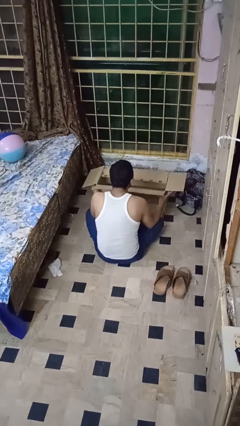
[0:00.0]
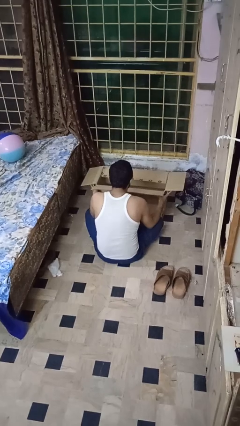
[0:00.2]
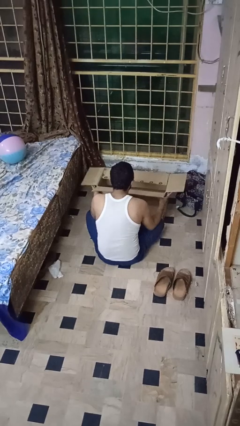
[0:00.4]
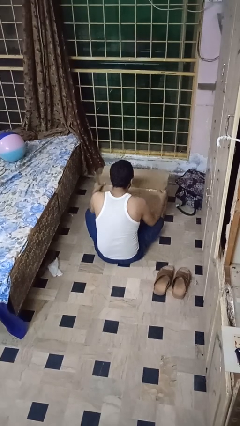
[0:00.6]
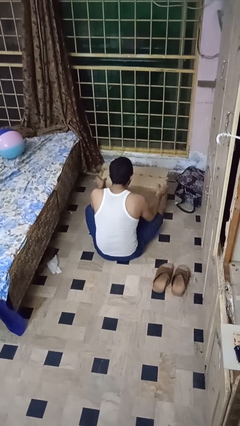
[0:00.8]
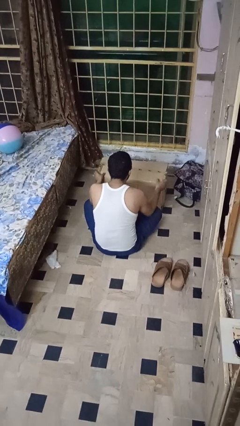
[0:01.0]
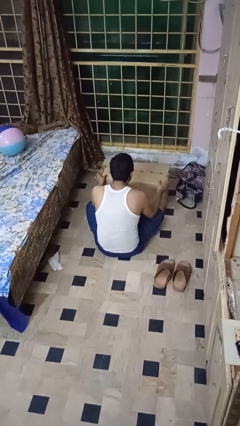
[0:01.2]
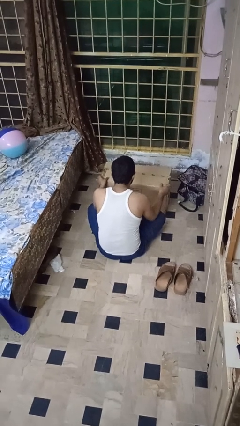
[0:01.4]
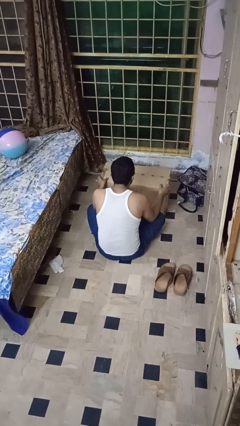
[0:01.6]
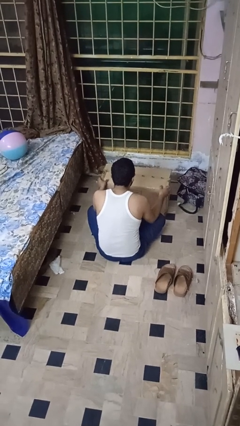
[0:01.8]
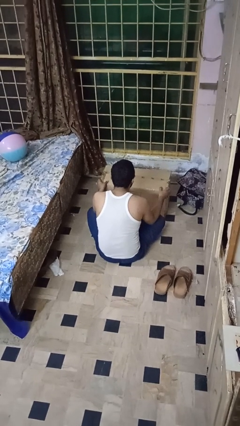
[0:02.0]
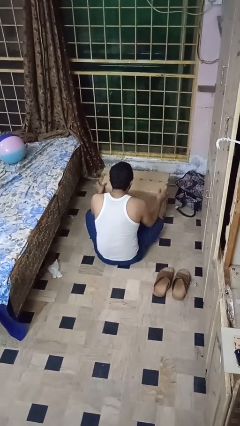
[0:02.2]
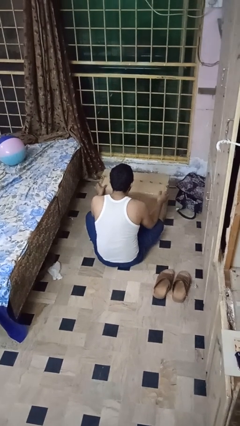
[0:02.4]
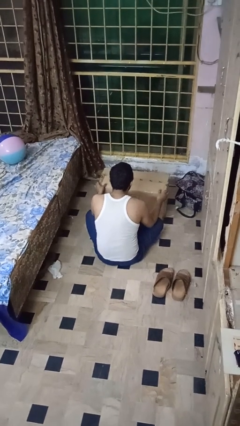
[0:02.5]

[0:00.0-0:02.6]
person closes box

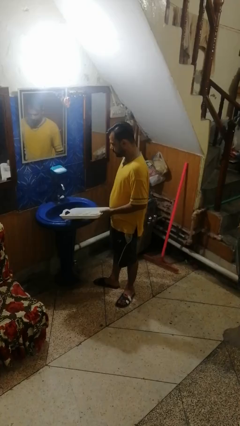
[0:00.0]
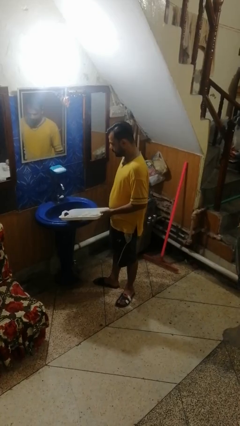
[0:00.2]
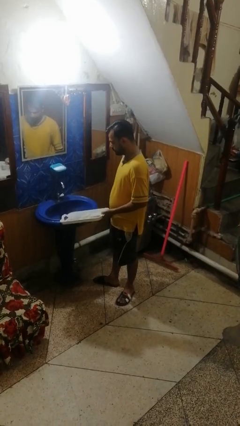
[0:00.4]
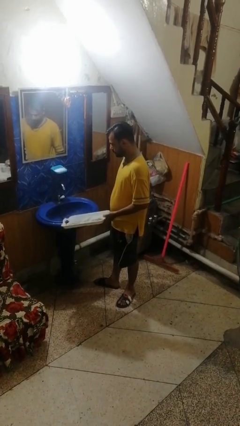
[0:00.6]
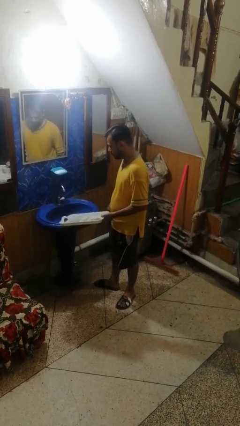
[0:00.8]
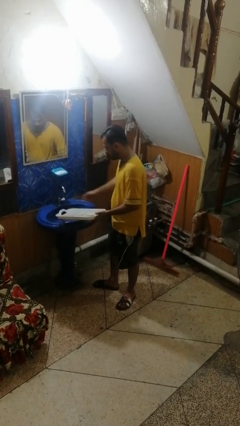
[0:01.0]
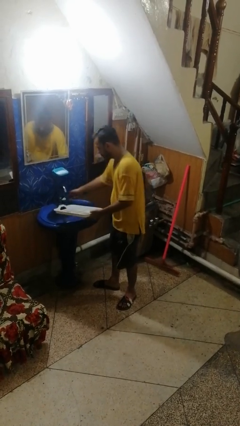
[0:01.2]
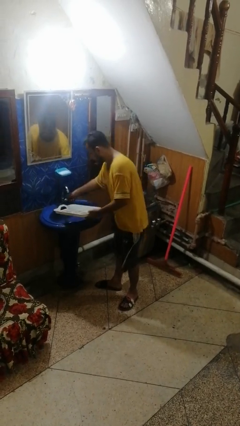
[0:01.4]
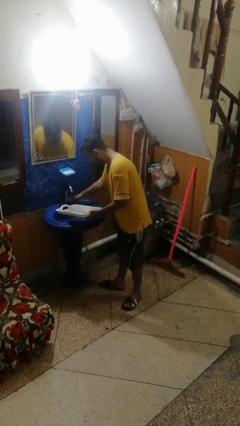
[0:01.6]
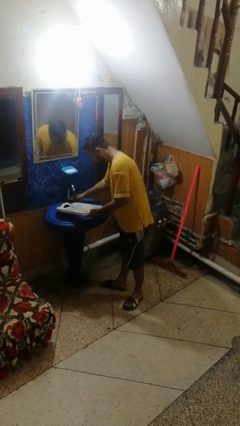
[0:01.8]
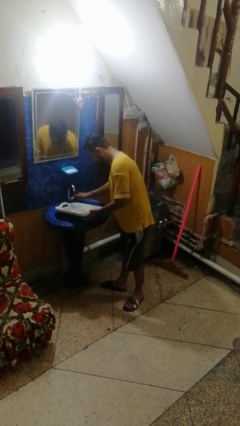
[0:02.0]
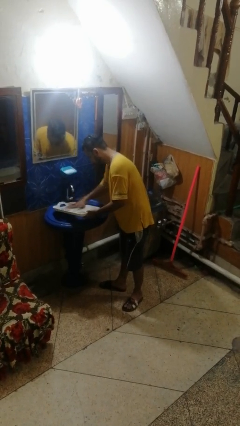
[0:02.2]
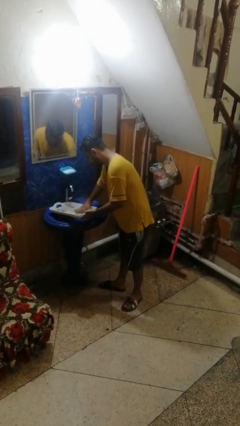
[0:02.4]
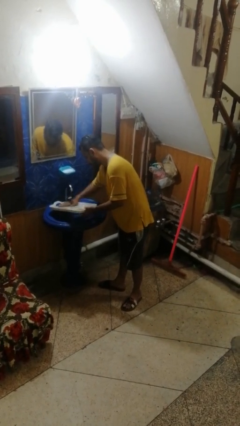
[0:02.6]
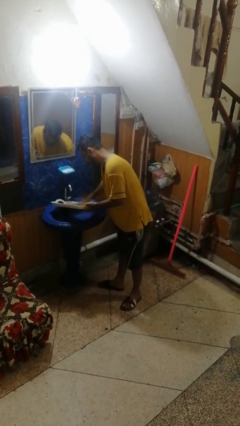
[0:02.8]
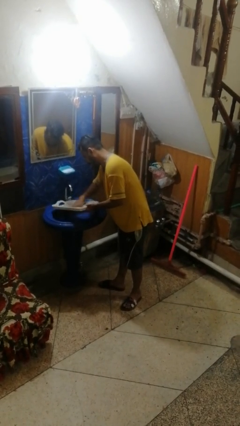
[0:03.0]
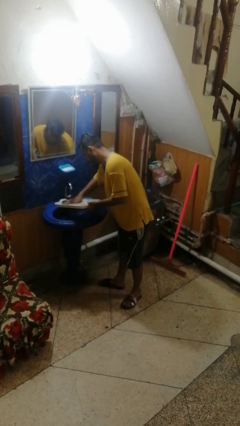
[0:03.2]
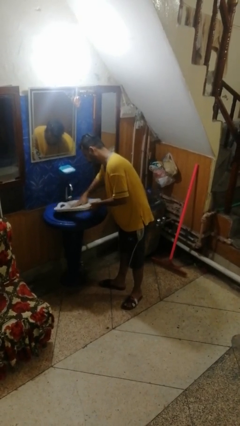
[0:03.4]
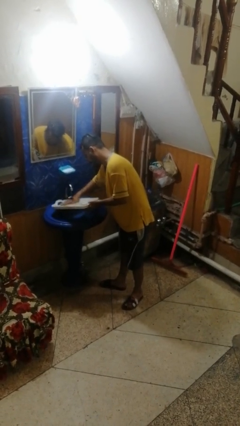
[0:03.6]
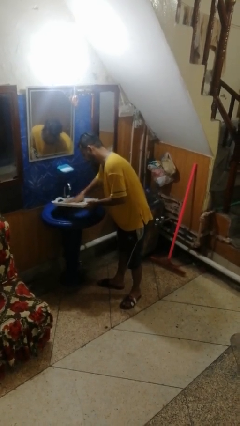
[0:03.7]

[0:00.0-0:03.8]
person washes dish

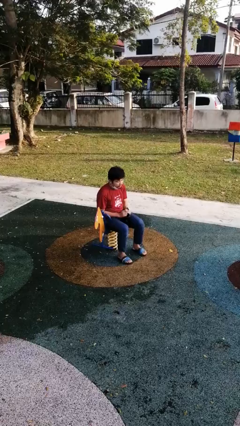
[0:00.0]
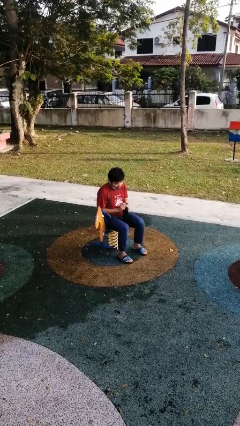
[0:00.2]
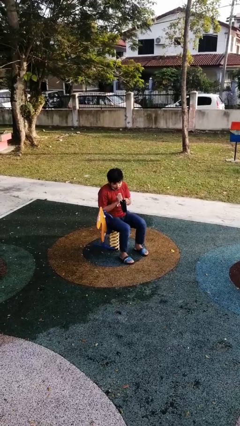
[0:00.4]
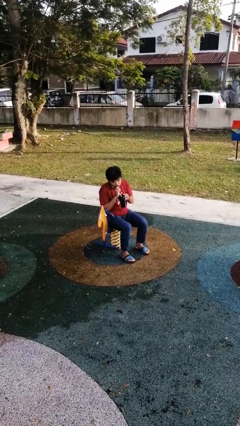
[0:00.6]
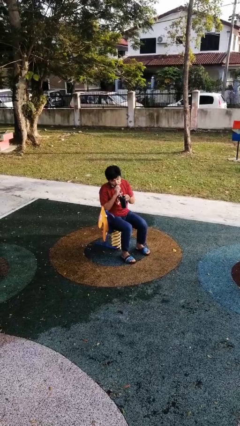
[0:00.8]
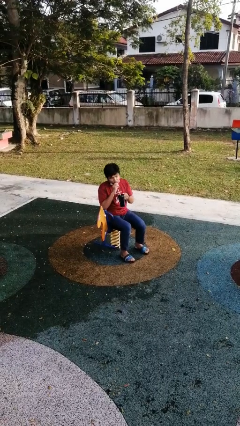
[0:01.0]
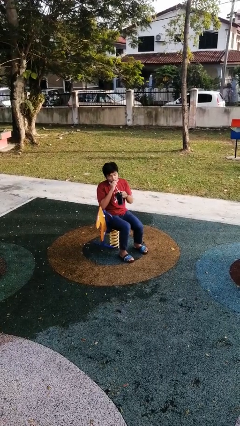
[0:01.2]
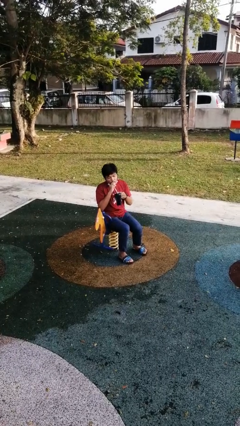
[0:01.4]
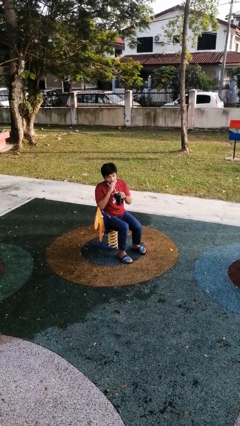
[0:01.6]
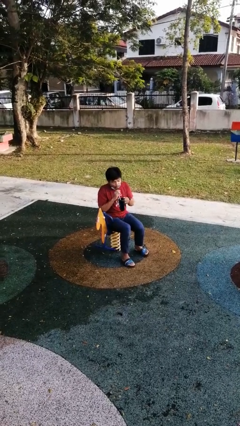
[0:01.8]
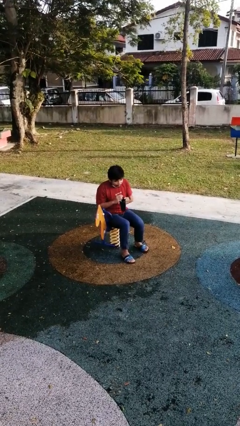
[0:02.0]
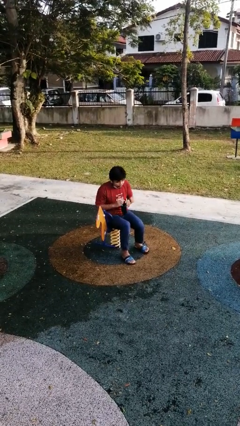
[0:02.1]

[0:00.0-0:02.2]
person drinks from straw

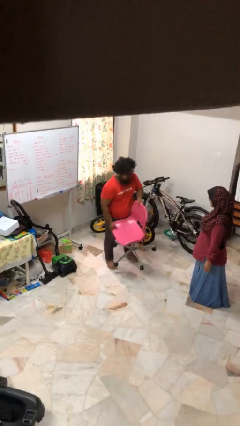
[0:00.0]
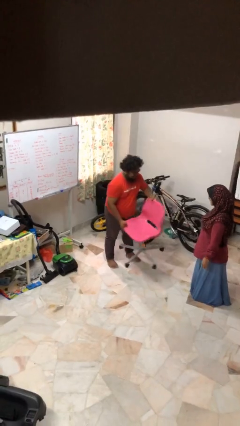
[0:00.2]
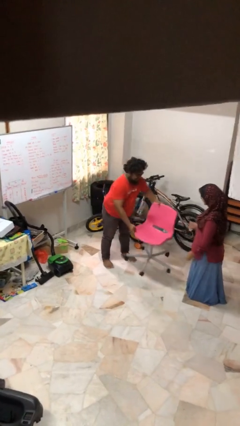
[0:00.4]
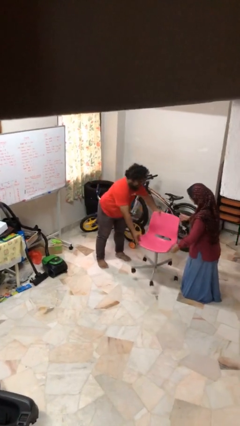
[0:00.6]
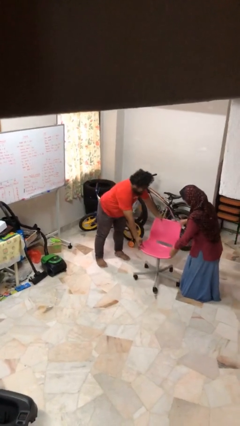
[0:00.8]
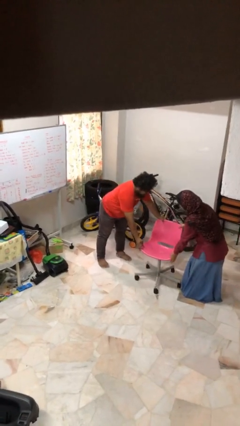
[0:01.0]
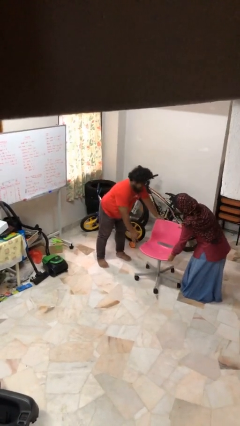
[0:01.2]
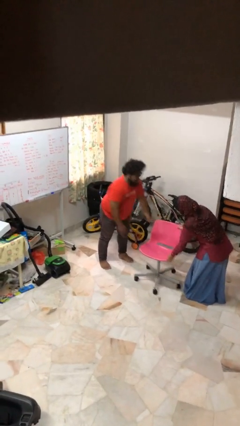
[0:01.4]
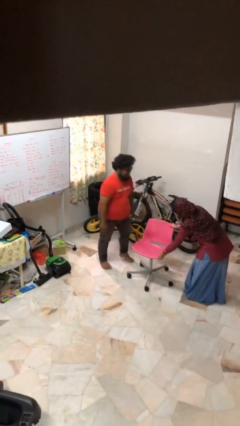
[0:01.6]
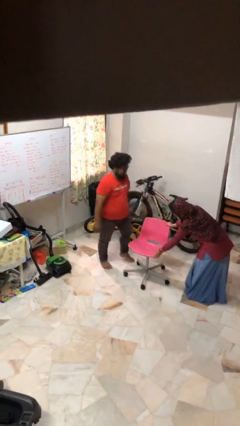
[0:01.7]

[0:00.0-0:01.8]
person transfers object to person

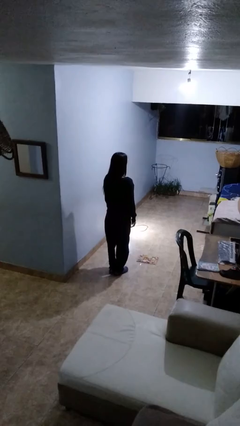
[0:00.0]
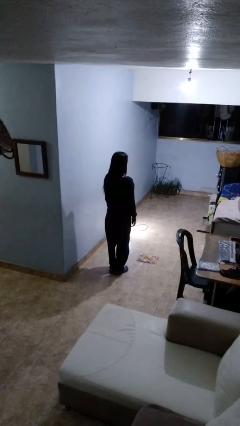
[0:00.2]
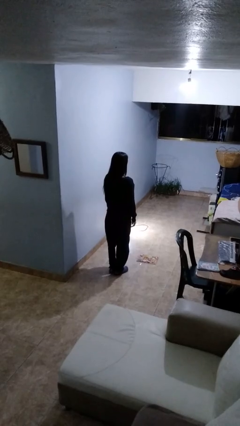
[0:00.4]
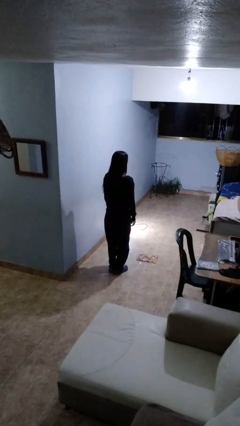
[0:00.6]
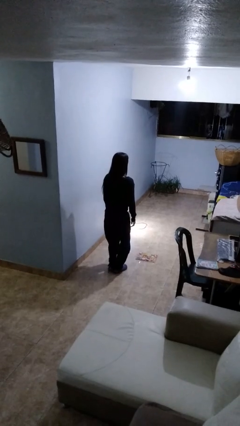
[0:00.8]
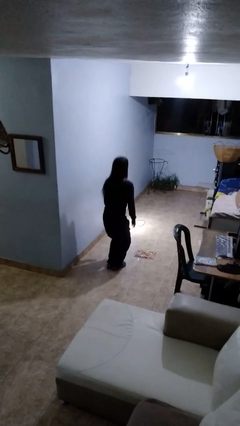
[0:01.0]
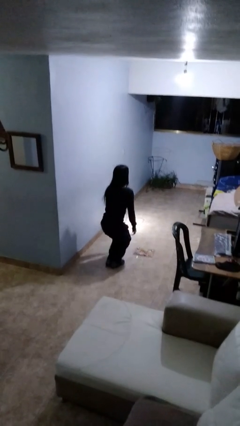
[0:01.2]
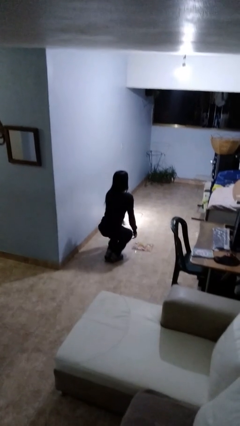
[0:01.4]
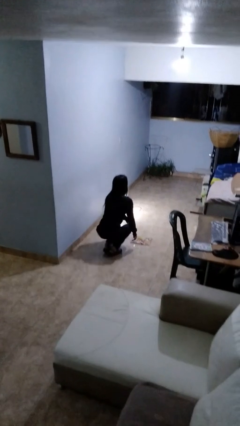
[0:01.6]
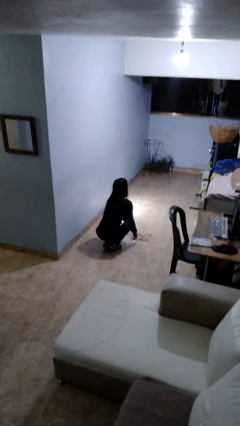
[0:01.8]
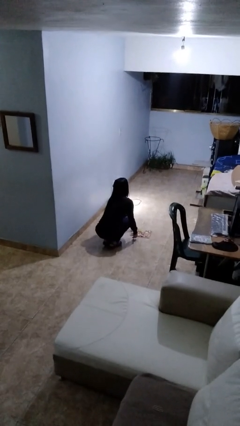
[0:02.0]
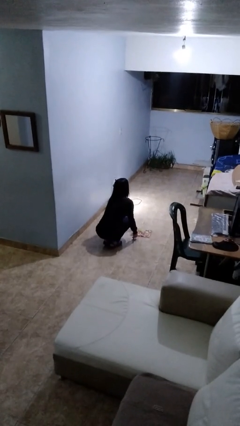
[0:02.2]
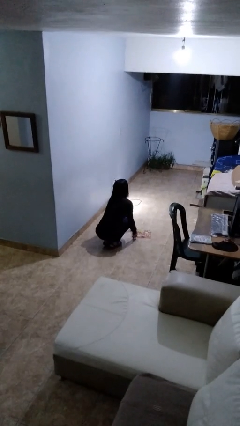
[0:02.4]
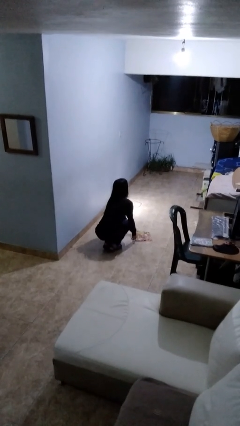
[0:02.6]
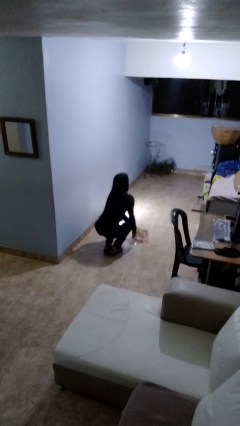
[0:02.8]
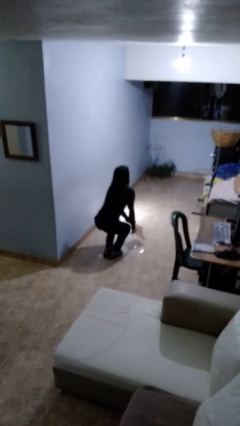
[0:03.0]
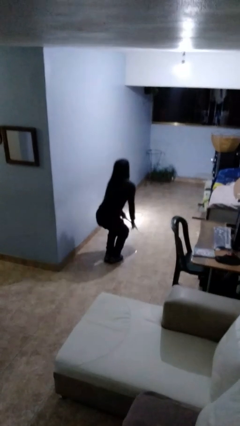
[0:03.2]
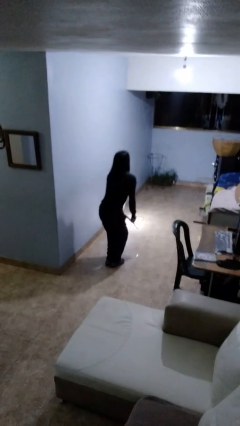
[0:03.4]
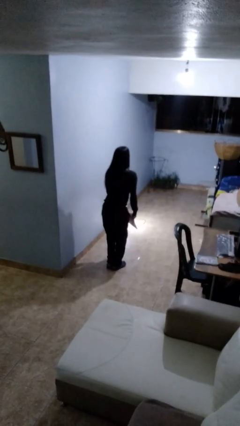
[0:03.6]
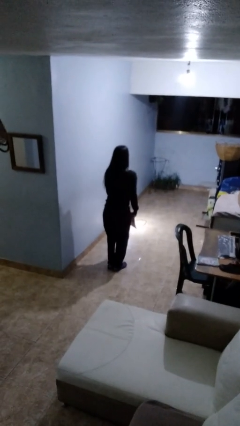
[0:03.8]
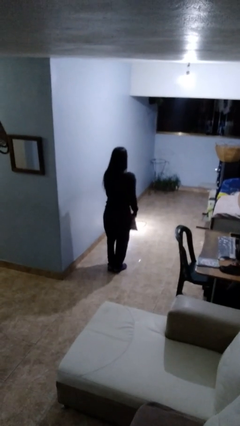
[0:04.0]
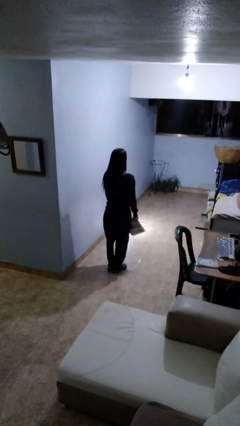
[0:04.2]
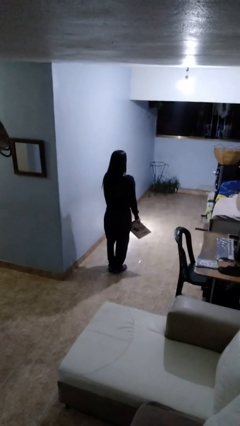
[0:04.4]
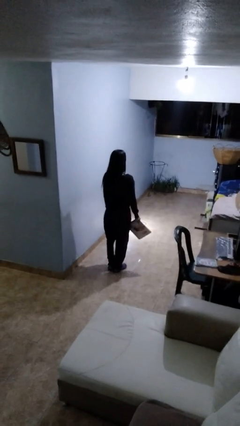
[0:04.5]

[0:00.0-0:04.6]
person picks up object from floor

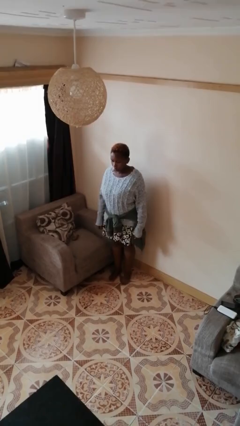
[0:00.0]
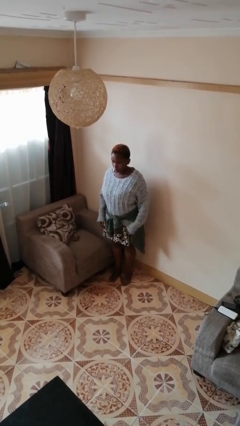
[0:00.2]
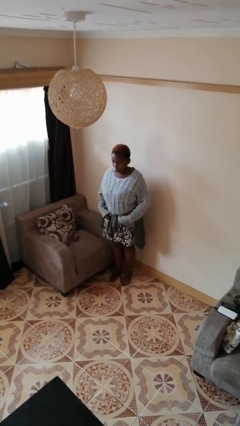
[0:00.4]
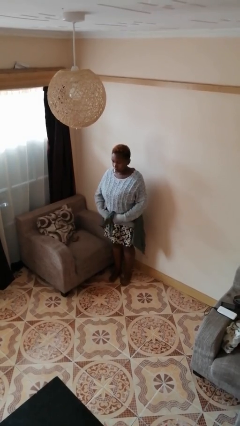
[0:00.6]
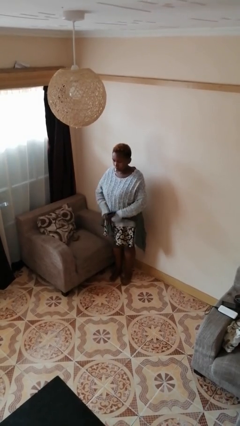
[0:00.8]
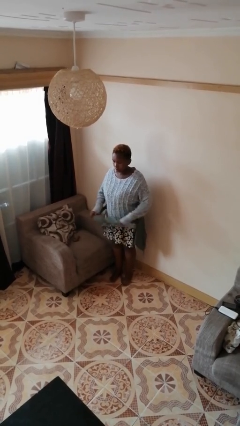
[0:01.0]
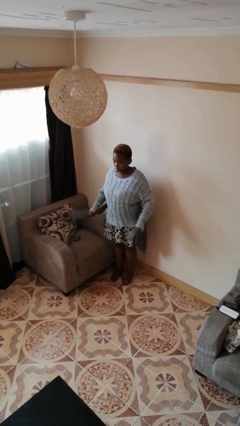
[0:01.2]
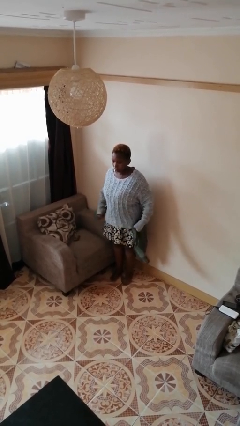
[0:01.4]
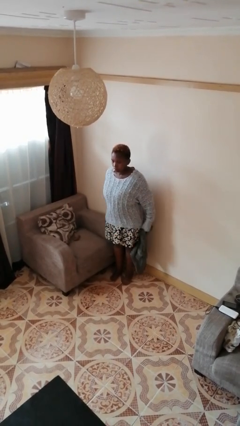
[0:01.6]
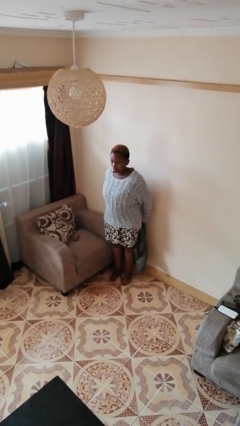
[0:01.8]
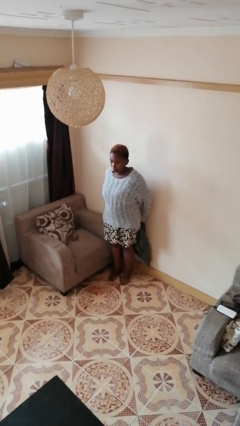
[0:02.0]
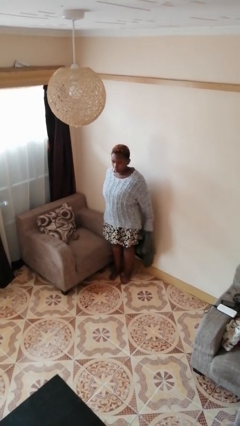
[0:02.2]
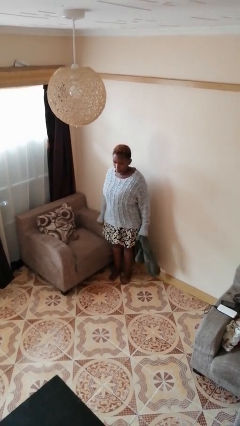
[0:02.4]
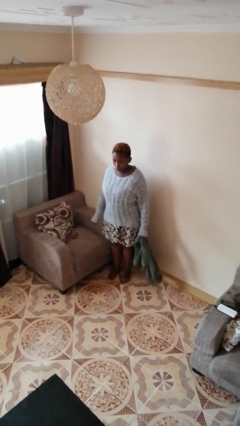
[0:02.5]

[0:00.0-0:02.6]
person unties jacket around waist
